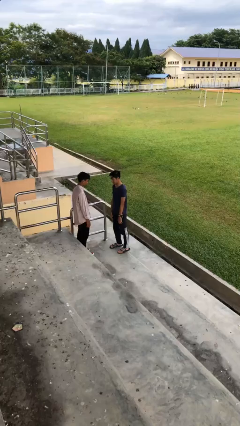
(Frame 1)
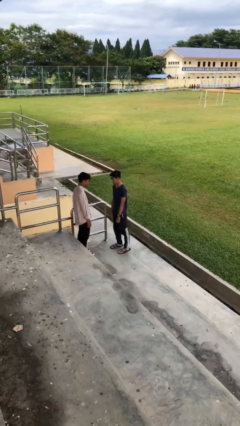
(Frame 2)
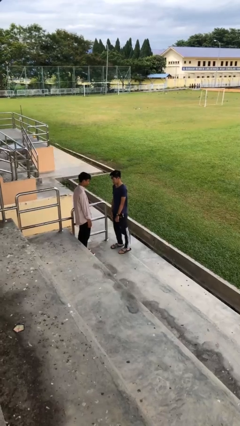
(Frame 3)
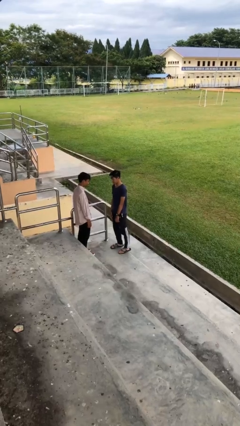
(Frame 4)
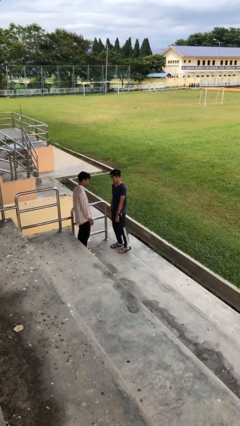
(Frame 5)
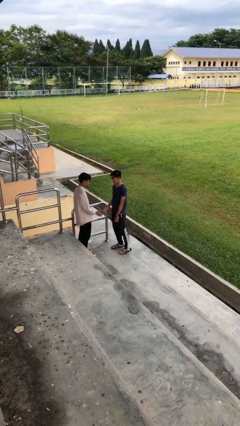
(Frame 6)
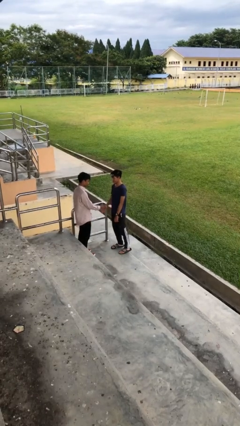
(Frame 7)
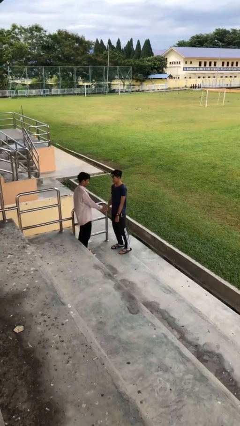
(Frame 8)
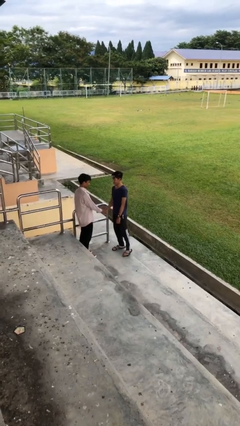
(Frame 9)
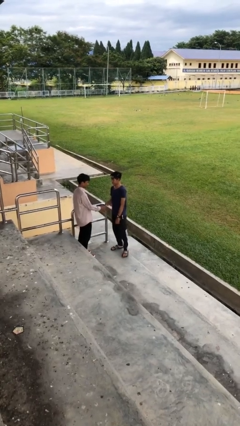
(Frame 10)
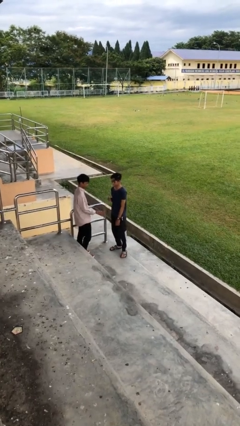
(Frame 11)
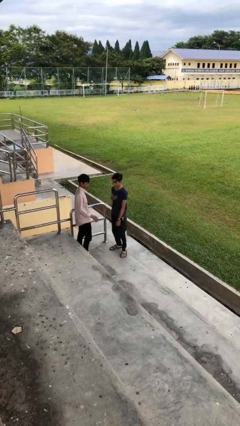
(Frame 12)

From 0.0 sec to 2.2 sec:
person shakes hand

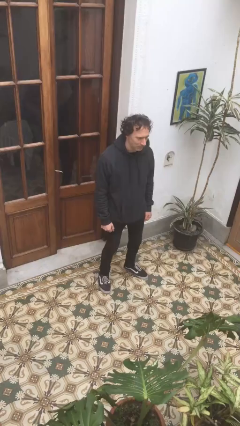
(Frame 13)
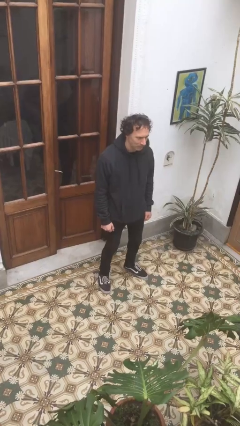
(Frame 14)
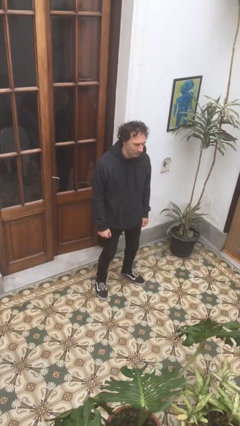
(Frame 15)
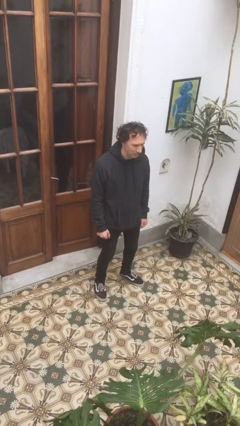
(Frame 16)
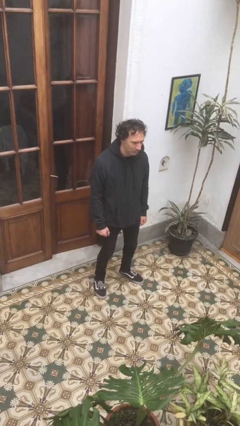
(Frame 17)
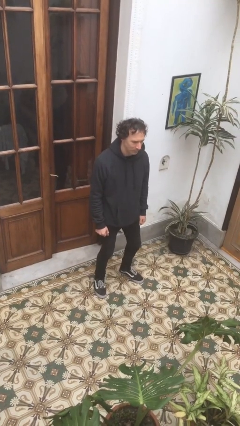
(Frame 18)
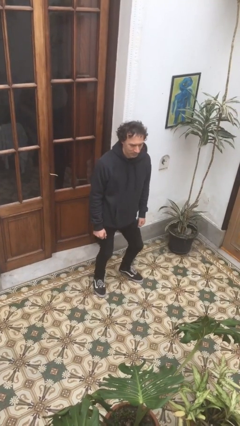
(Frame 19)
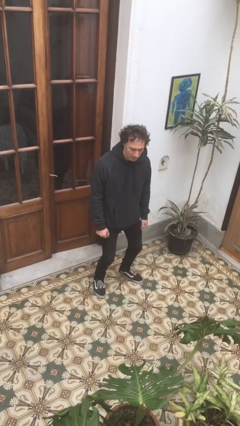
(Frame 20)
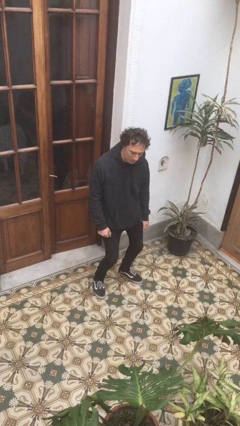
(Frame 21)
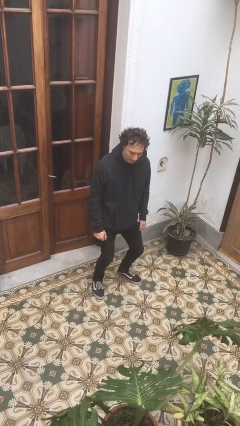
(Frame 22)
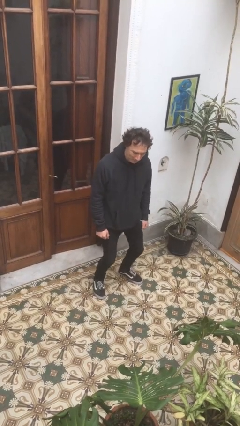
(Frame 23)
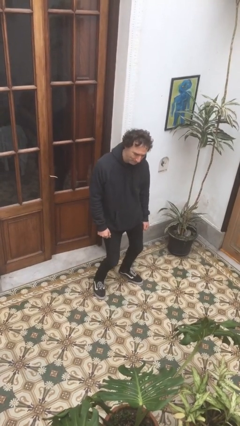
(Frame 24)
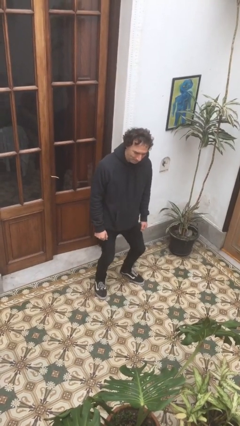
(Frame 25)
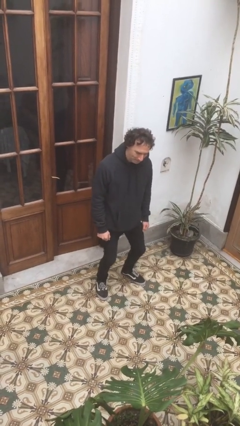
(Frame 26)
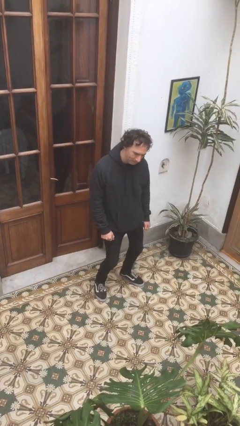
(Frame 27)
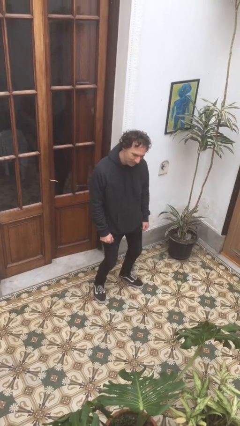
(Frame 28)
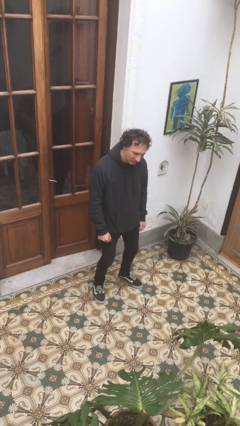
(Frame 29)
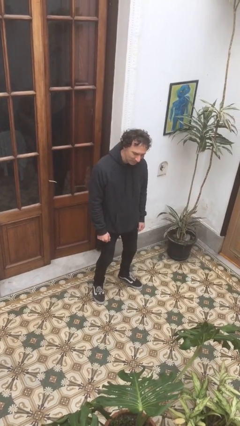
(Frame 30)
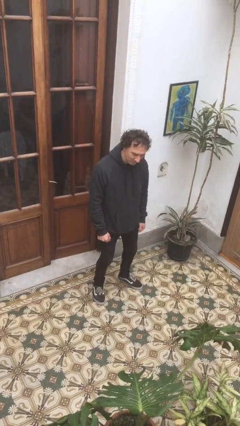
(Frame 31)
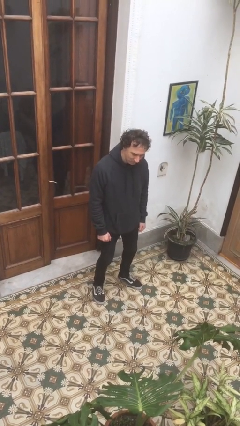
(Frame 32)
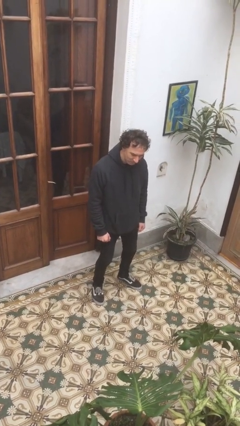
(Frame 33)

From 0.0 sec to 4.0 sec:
person wiggles hips

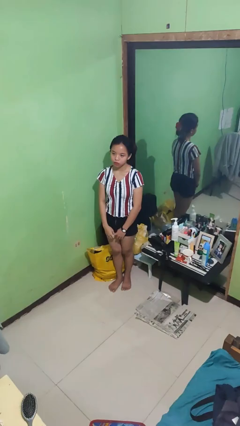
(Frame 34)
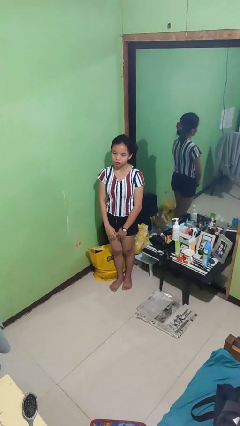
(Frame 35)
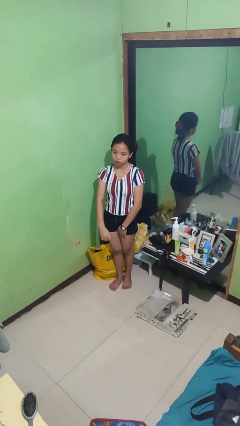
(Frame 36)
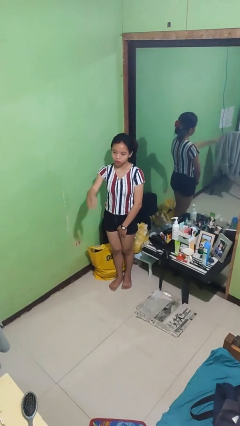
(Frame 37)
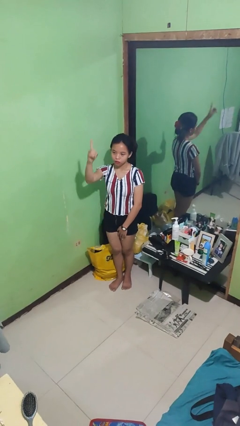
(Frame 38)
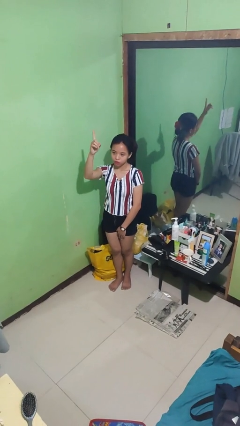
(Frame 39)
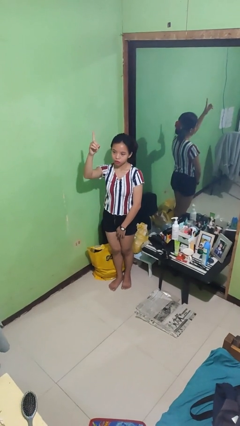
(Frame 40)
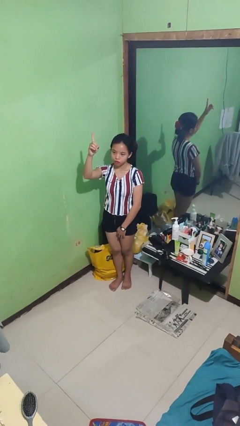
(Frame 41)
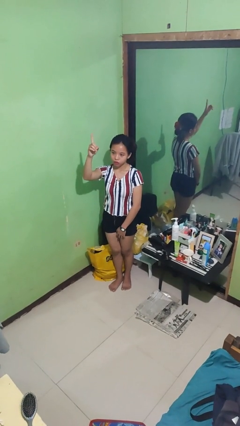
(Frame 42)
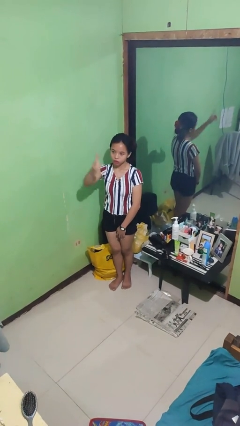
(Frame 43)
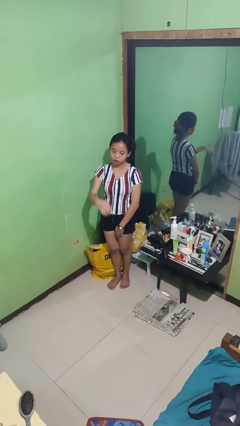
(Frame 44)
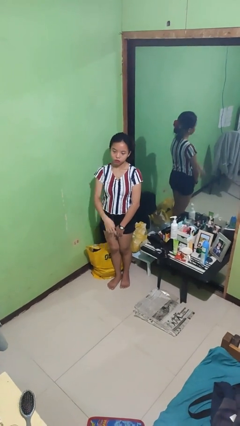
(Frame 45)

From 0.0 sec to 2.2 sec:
person gestures number one

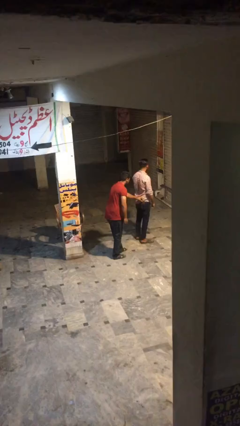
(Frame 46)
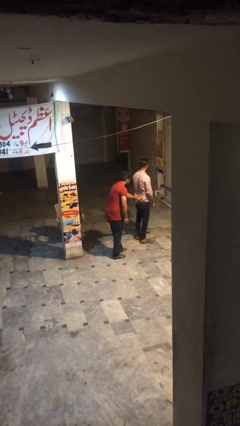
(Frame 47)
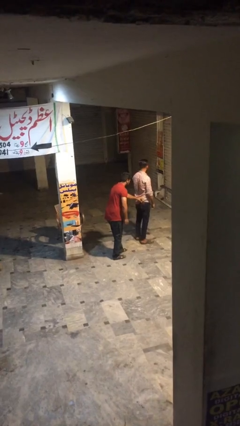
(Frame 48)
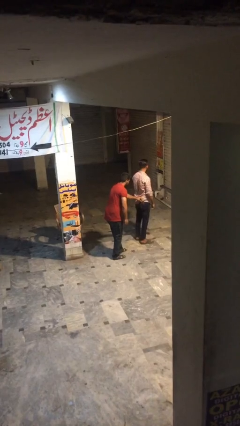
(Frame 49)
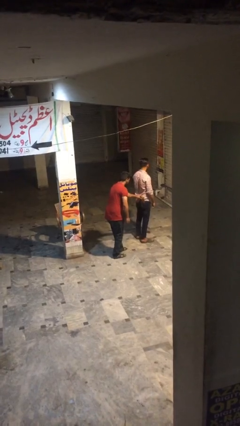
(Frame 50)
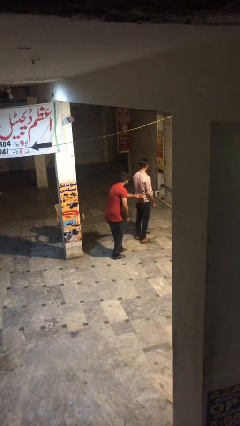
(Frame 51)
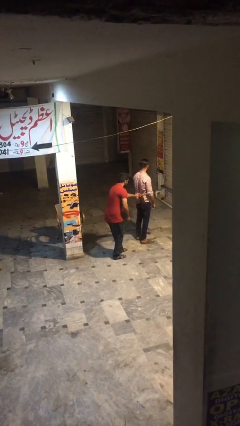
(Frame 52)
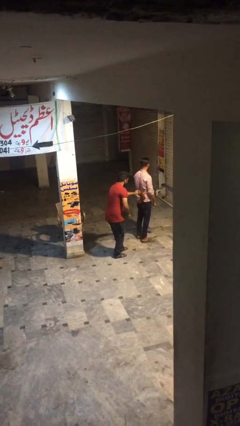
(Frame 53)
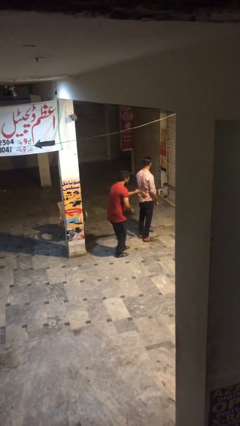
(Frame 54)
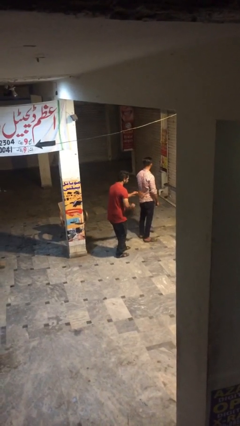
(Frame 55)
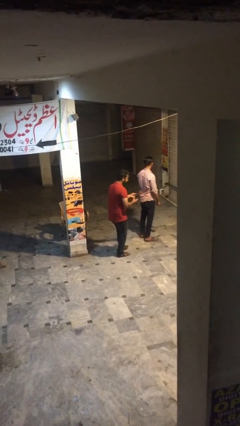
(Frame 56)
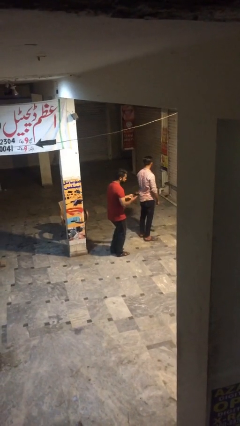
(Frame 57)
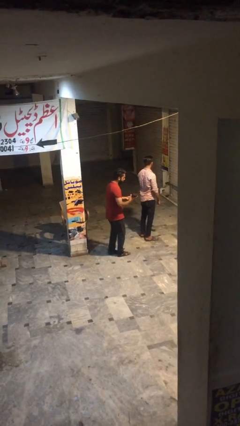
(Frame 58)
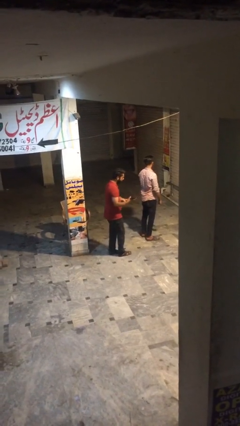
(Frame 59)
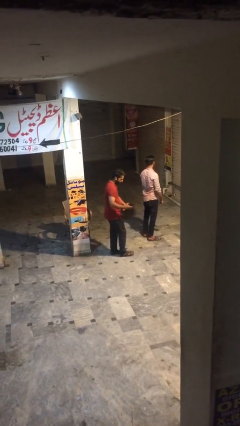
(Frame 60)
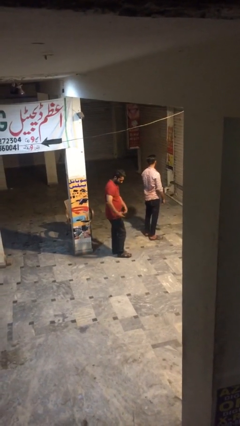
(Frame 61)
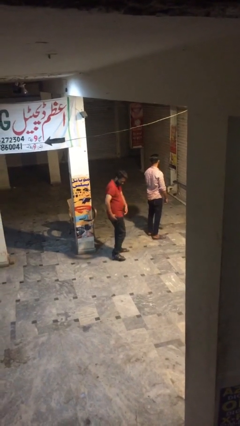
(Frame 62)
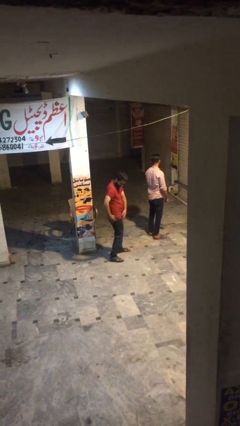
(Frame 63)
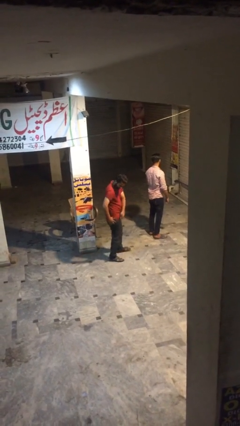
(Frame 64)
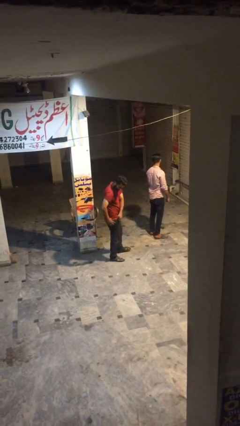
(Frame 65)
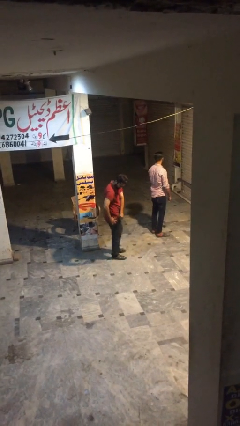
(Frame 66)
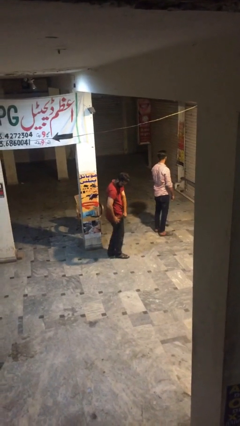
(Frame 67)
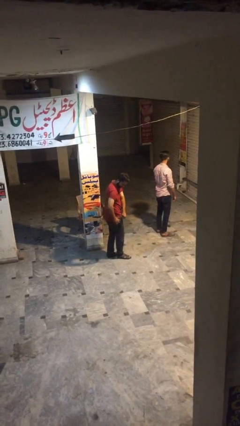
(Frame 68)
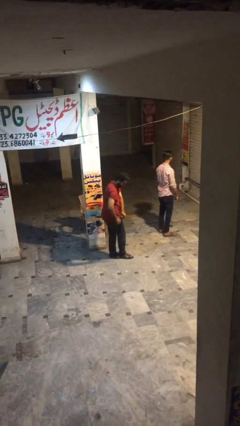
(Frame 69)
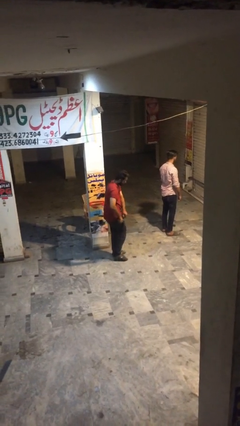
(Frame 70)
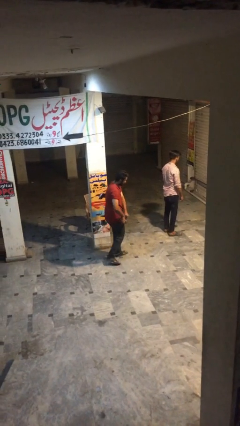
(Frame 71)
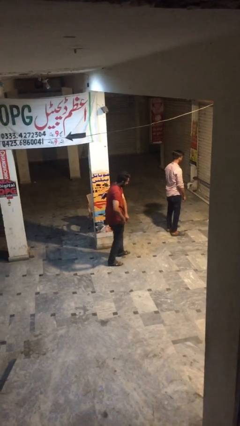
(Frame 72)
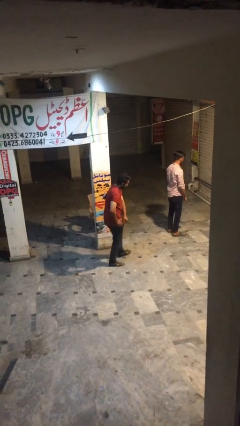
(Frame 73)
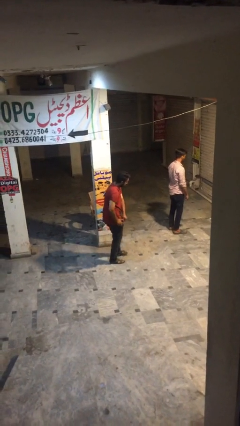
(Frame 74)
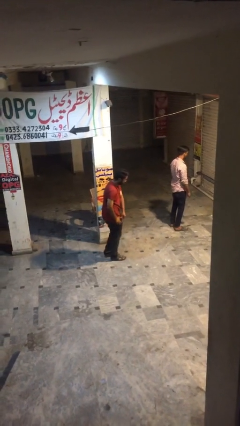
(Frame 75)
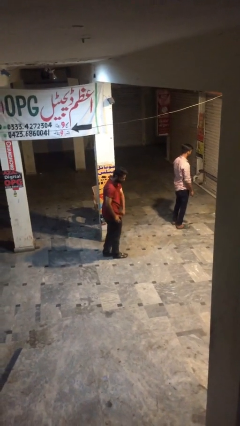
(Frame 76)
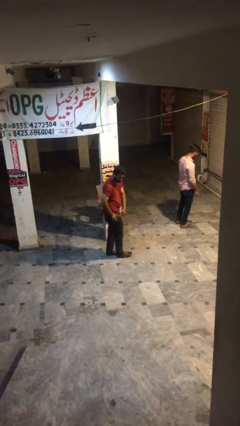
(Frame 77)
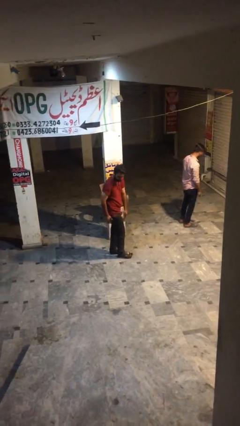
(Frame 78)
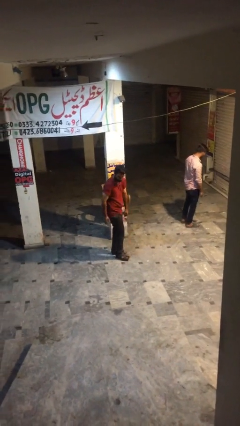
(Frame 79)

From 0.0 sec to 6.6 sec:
person steals object from person

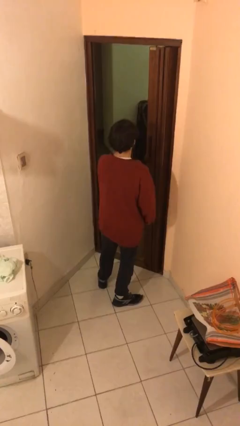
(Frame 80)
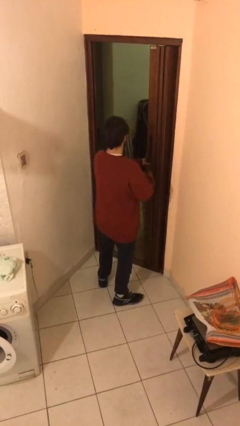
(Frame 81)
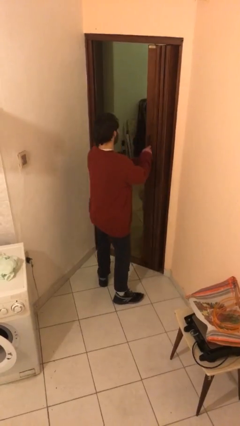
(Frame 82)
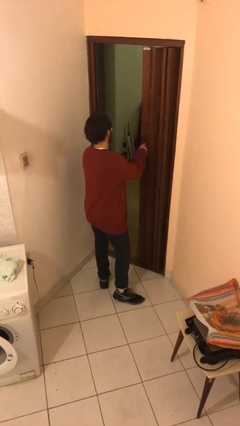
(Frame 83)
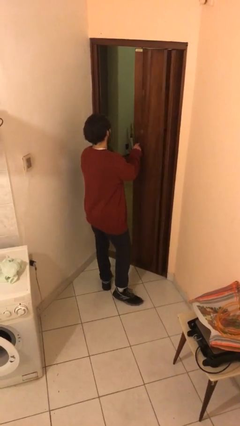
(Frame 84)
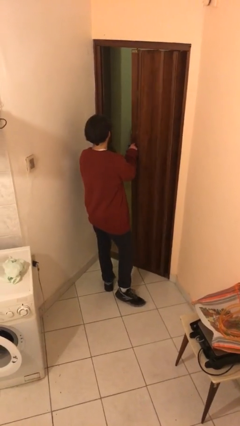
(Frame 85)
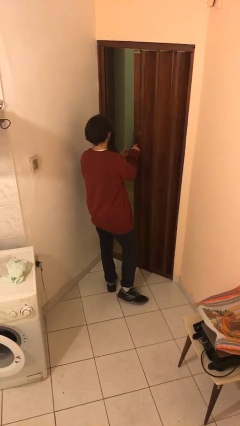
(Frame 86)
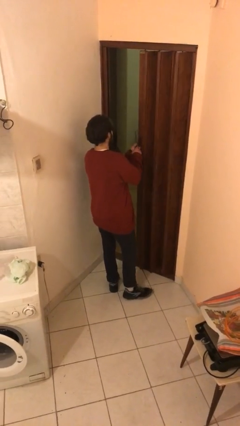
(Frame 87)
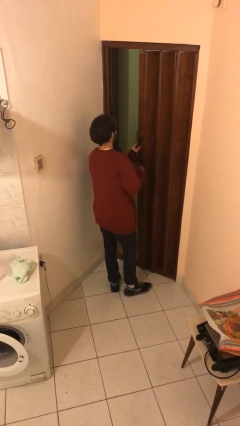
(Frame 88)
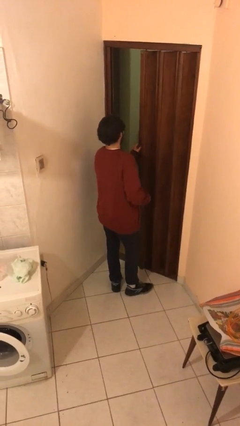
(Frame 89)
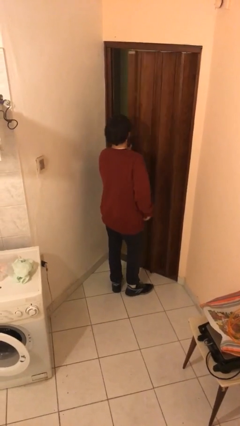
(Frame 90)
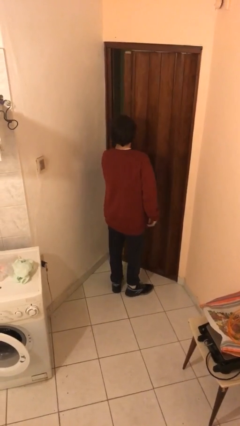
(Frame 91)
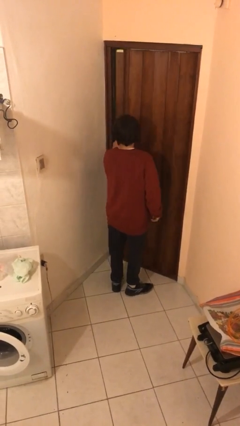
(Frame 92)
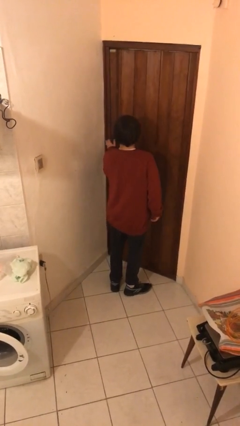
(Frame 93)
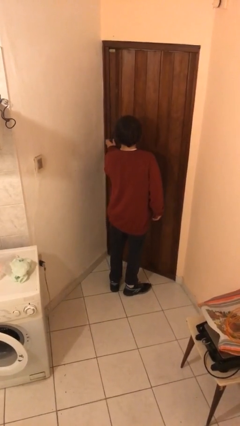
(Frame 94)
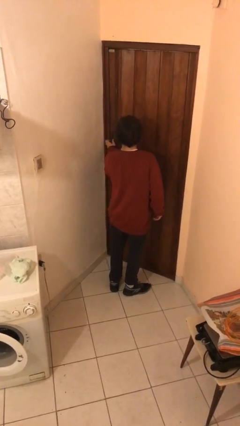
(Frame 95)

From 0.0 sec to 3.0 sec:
person closes sliding door
